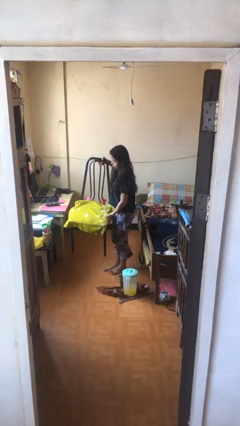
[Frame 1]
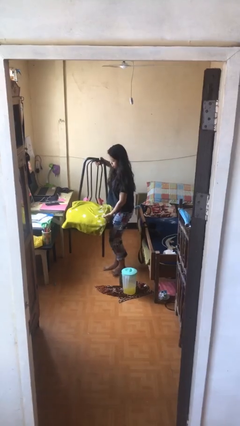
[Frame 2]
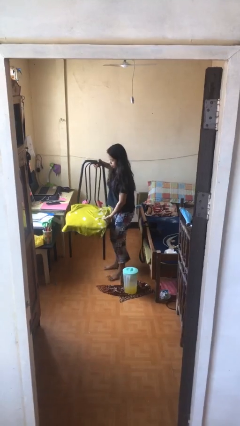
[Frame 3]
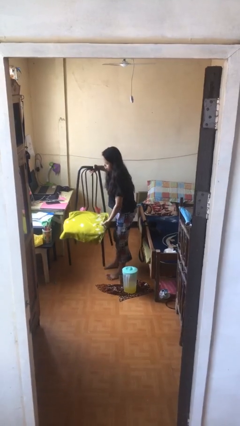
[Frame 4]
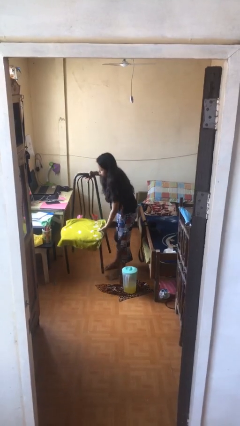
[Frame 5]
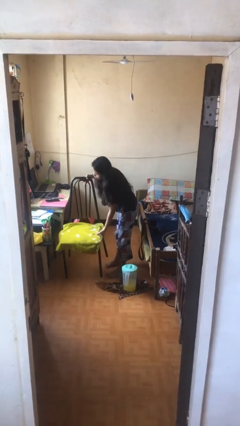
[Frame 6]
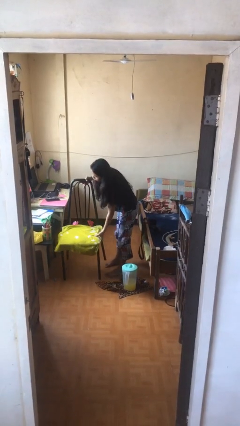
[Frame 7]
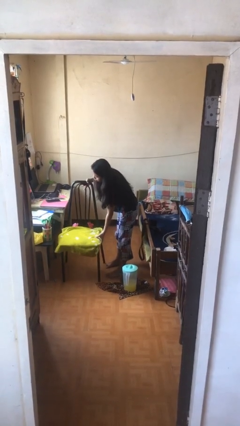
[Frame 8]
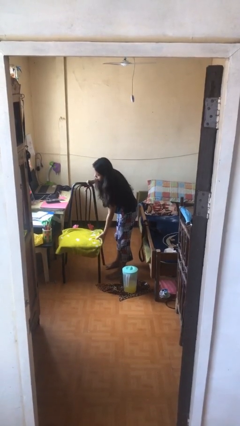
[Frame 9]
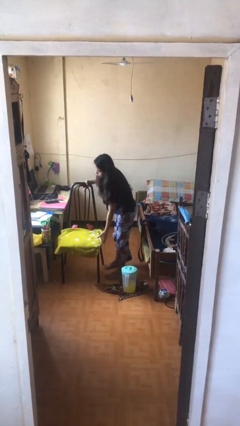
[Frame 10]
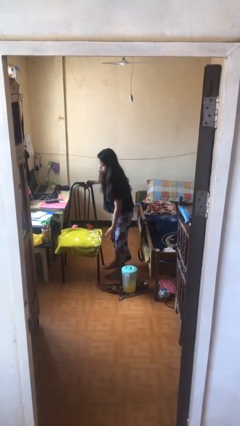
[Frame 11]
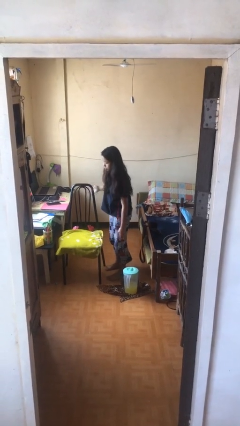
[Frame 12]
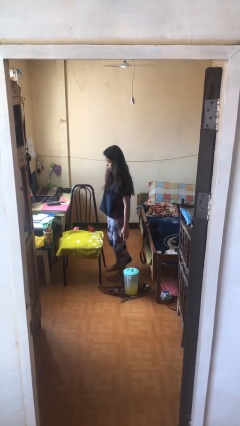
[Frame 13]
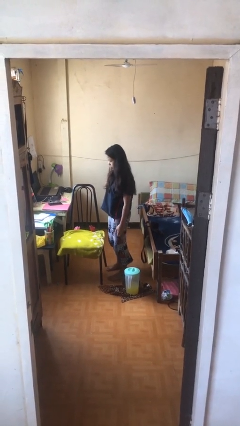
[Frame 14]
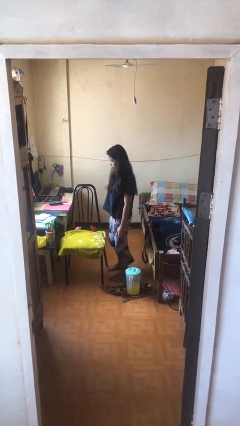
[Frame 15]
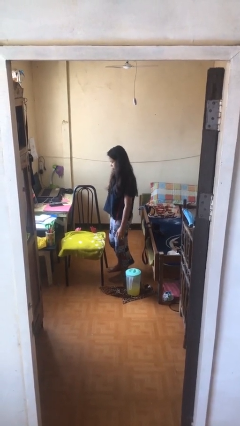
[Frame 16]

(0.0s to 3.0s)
person puts down object on floor

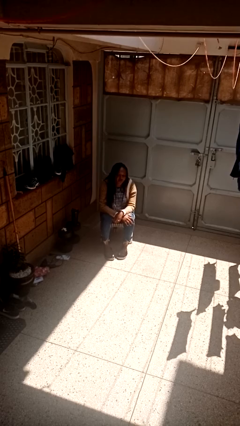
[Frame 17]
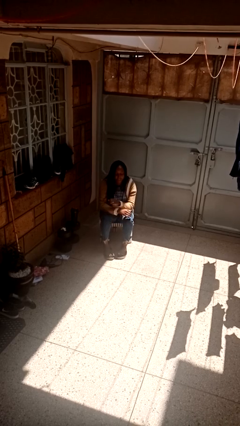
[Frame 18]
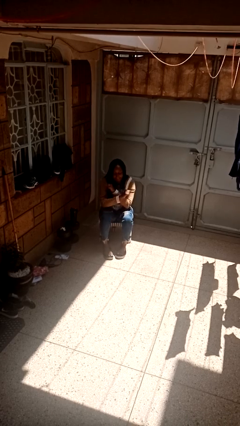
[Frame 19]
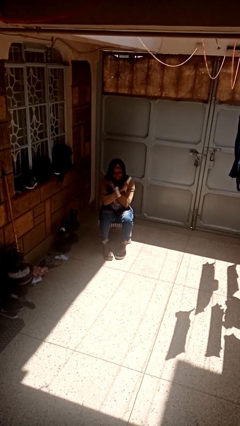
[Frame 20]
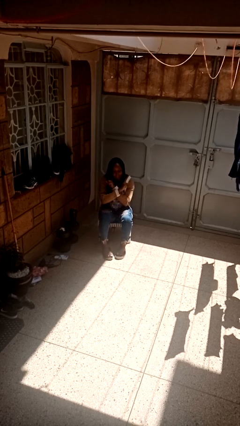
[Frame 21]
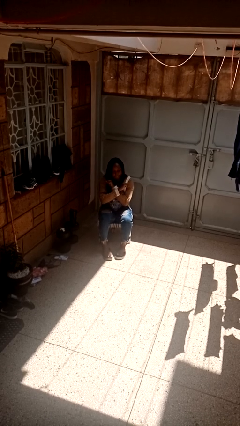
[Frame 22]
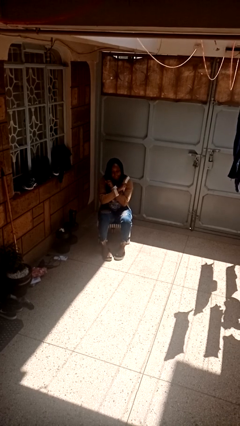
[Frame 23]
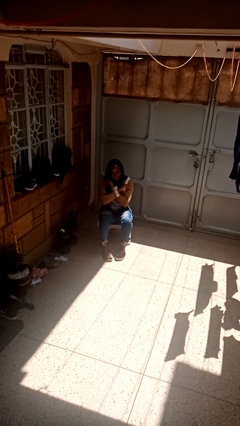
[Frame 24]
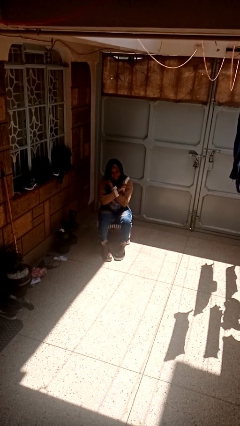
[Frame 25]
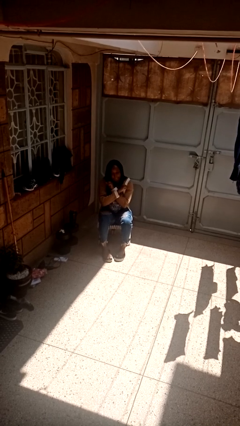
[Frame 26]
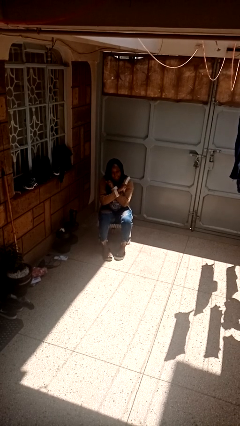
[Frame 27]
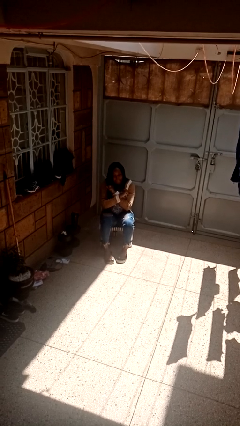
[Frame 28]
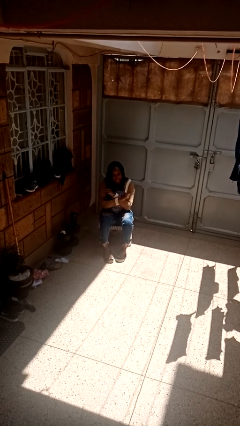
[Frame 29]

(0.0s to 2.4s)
person gestures arms x

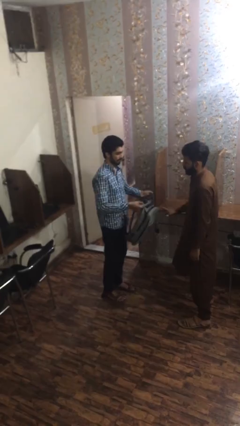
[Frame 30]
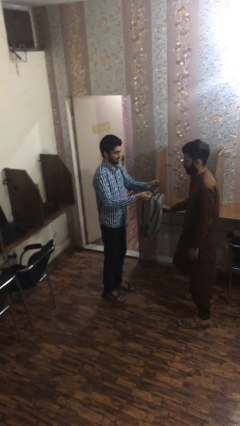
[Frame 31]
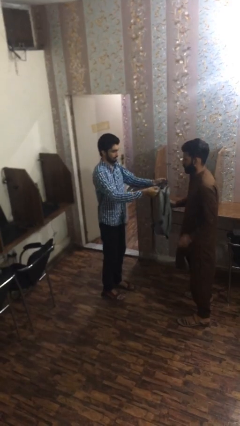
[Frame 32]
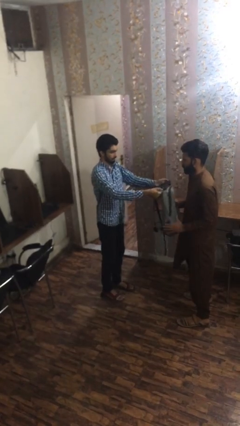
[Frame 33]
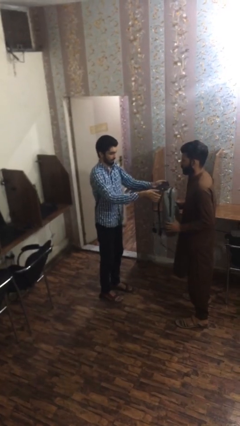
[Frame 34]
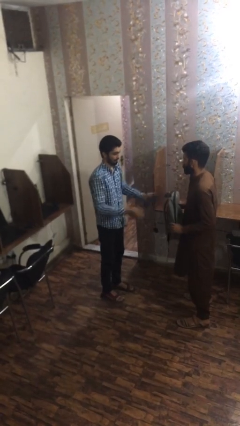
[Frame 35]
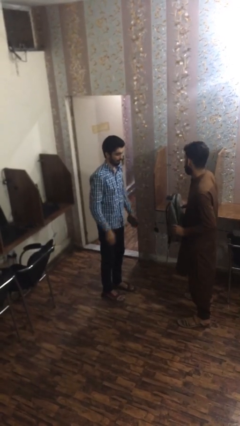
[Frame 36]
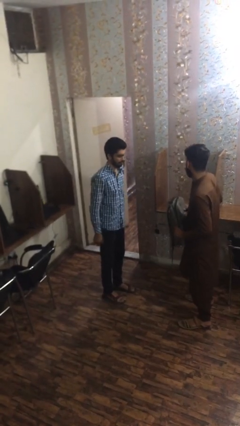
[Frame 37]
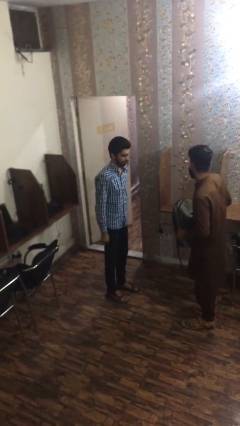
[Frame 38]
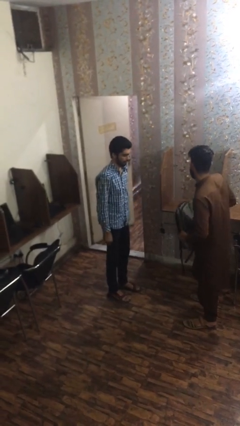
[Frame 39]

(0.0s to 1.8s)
person transfers object to person

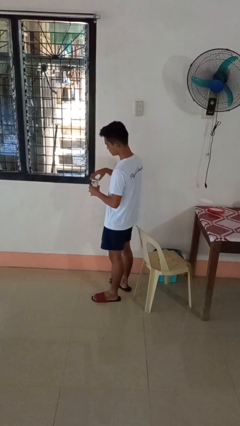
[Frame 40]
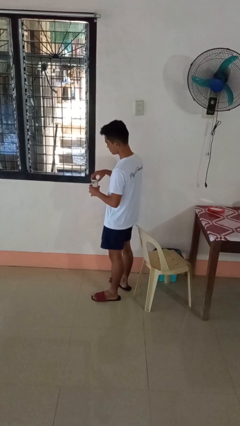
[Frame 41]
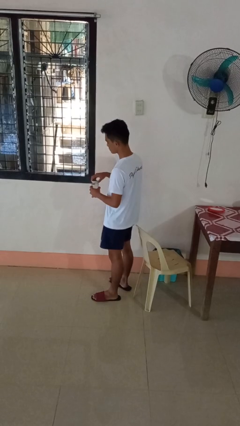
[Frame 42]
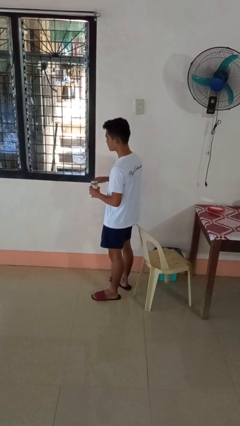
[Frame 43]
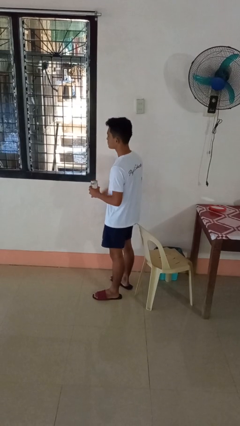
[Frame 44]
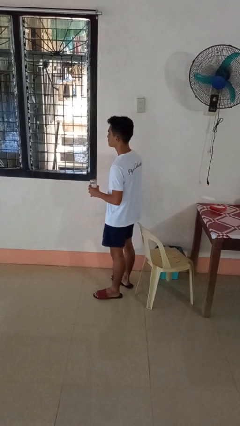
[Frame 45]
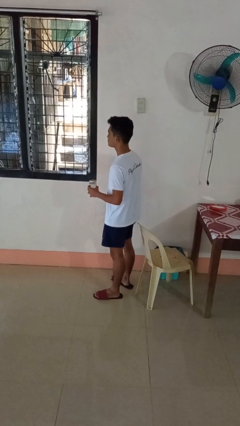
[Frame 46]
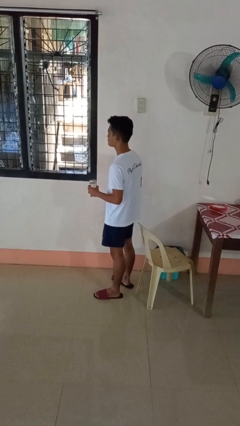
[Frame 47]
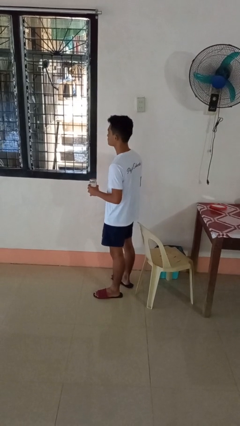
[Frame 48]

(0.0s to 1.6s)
person closes jar

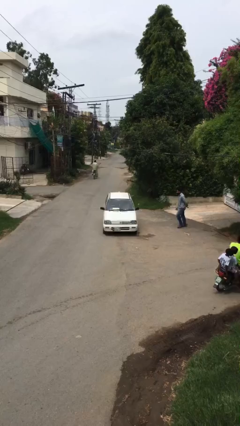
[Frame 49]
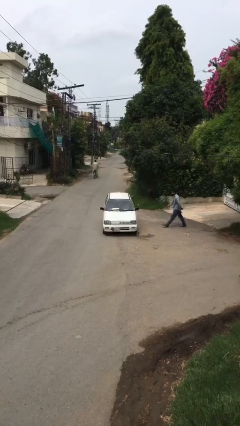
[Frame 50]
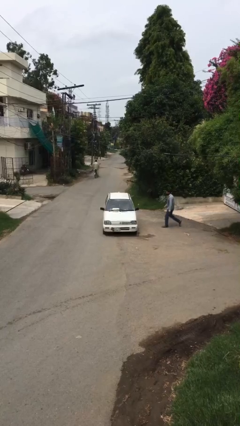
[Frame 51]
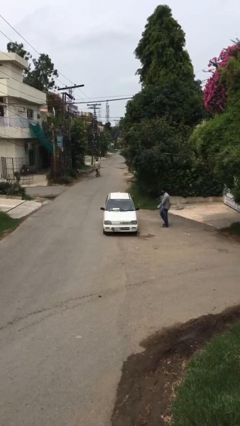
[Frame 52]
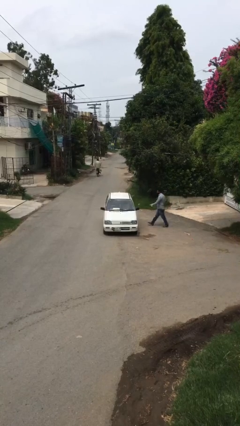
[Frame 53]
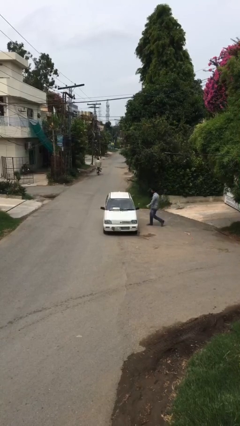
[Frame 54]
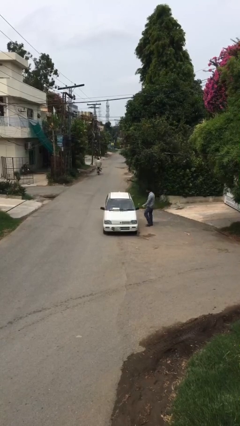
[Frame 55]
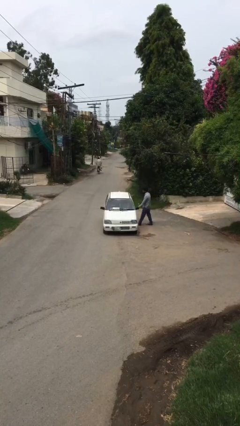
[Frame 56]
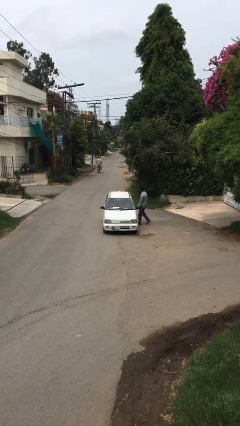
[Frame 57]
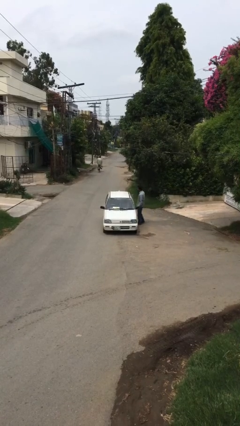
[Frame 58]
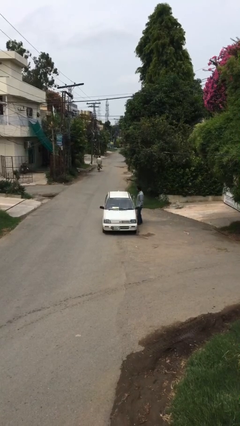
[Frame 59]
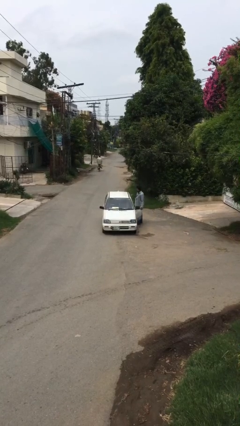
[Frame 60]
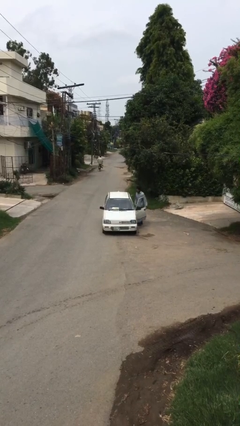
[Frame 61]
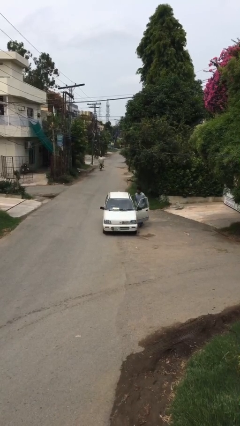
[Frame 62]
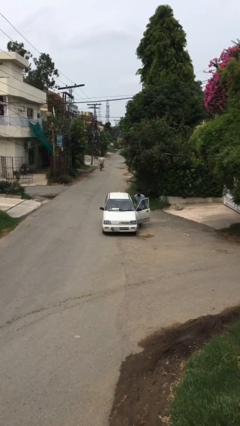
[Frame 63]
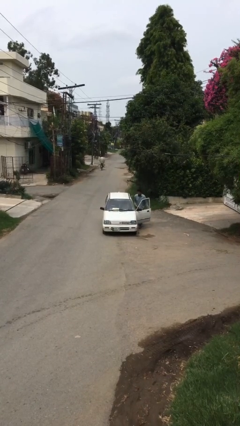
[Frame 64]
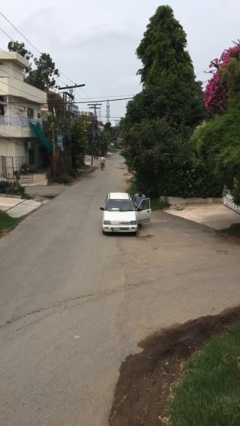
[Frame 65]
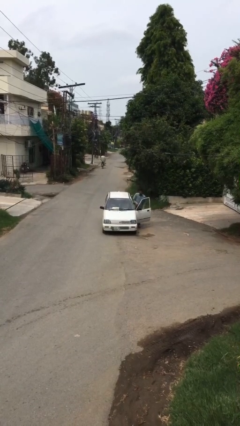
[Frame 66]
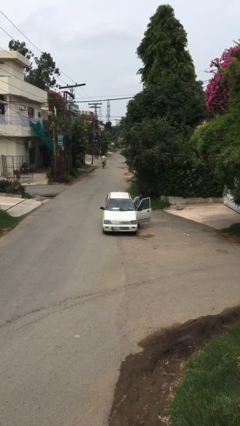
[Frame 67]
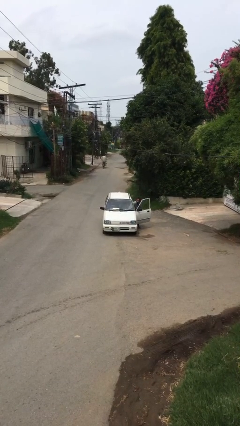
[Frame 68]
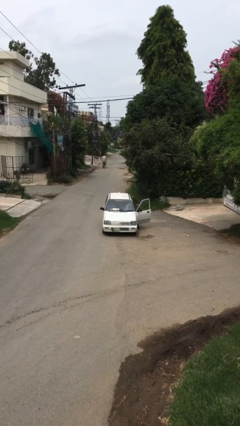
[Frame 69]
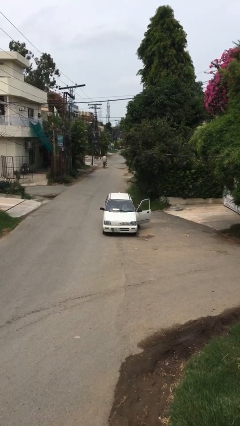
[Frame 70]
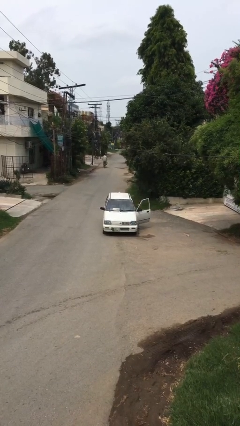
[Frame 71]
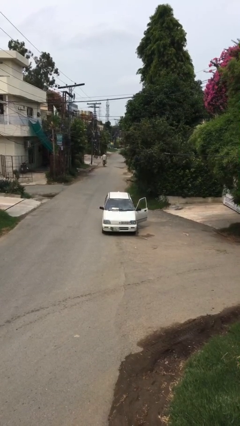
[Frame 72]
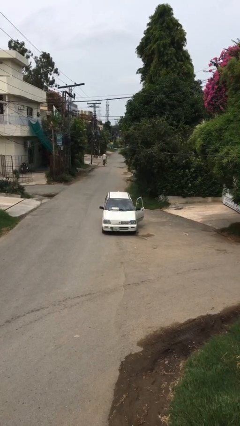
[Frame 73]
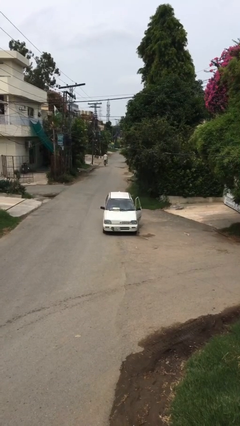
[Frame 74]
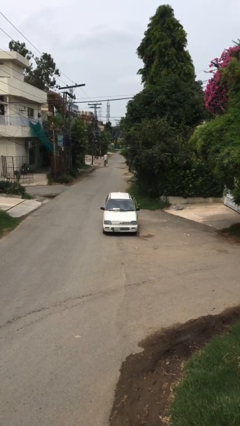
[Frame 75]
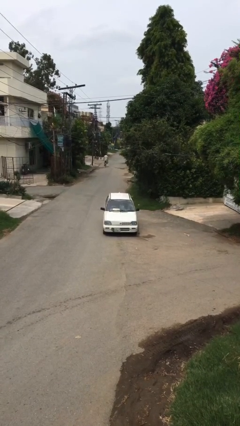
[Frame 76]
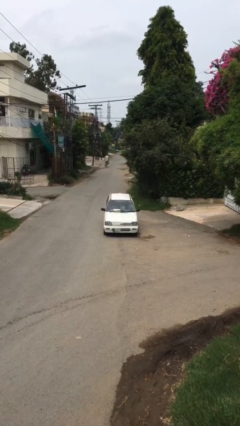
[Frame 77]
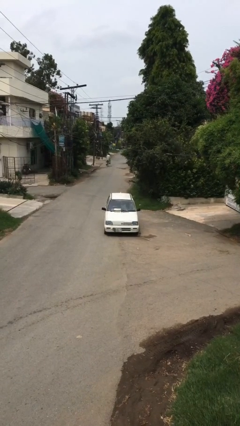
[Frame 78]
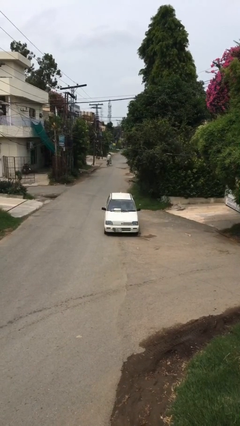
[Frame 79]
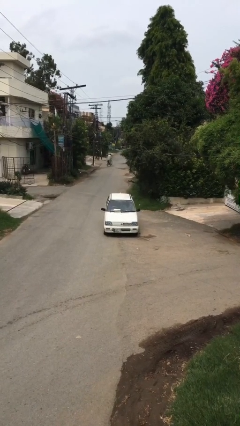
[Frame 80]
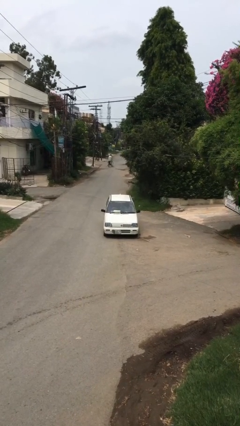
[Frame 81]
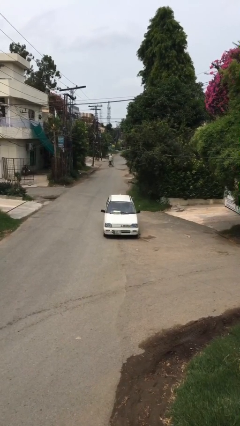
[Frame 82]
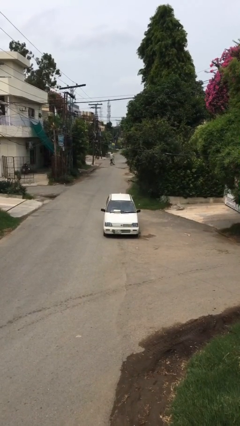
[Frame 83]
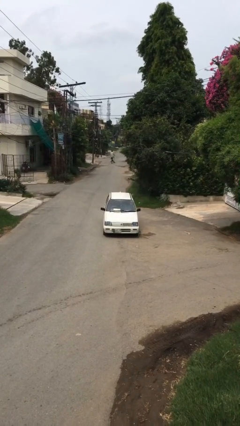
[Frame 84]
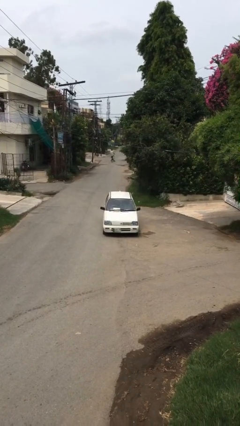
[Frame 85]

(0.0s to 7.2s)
car picks up person

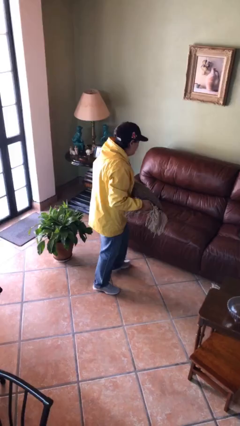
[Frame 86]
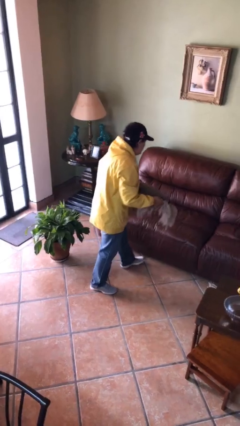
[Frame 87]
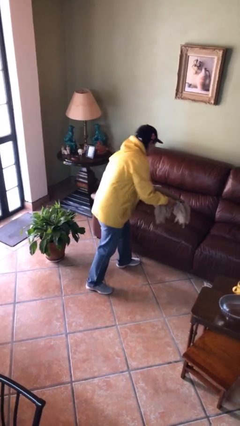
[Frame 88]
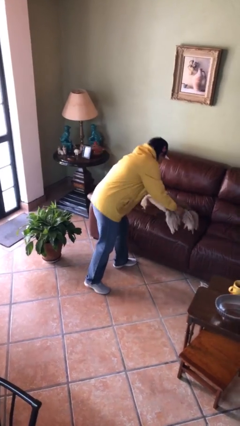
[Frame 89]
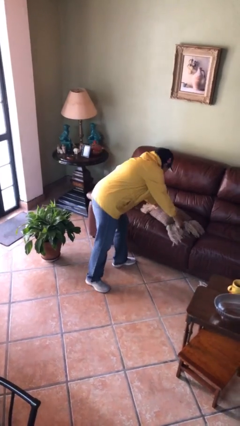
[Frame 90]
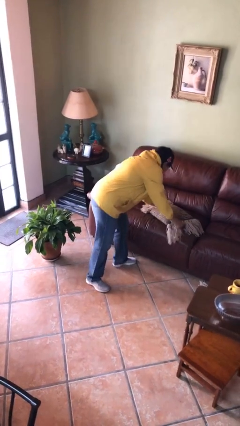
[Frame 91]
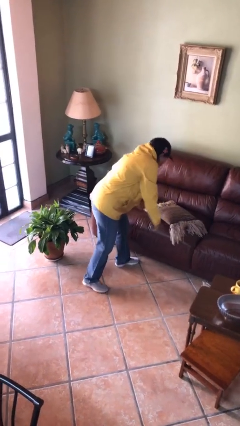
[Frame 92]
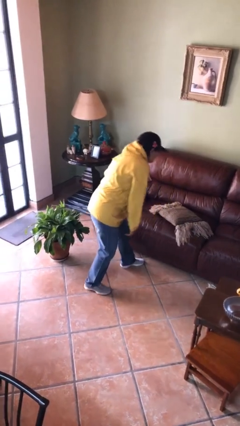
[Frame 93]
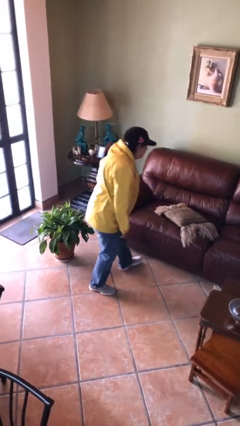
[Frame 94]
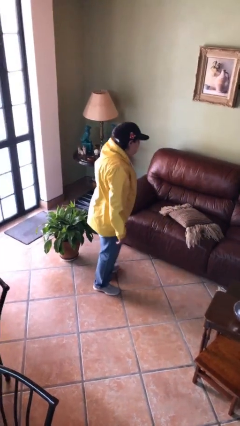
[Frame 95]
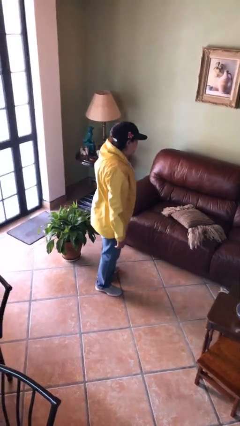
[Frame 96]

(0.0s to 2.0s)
person puts down object on couch
